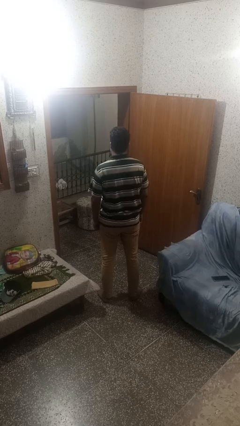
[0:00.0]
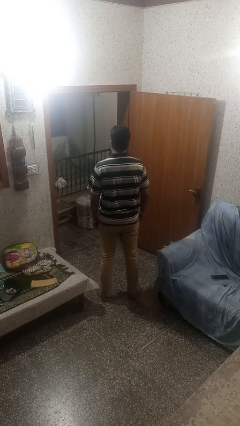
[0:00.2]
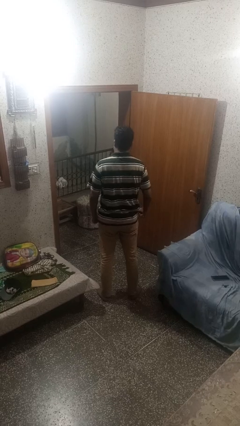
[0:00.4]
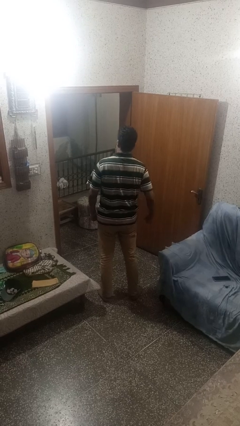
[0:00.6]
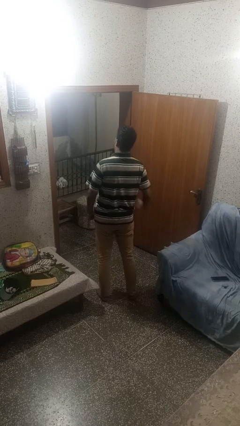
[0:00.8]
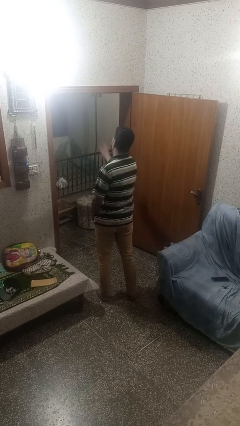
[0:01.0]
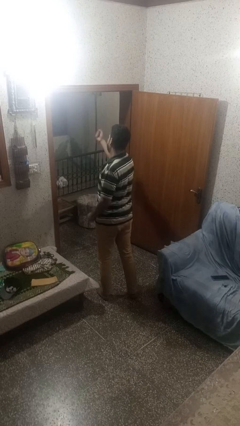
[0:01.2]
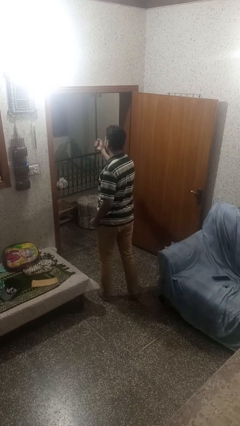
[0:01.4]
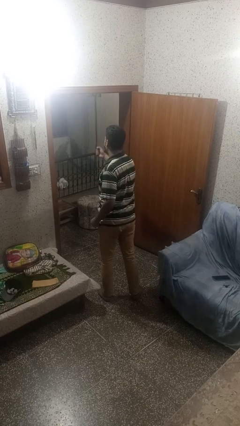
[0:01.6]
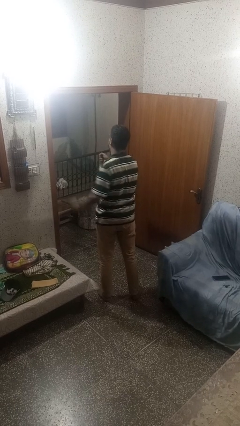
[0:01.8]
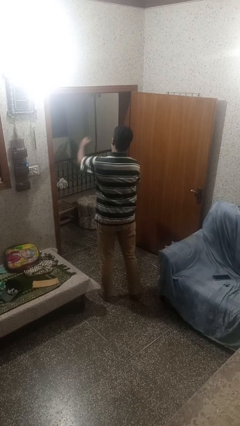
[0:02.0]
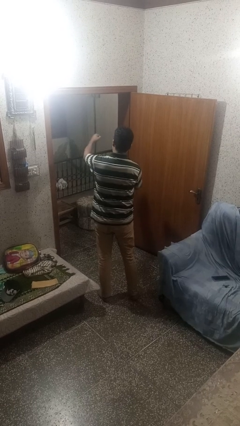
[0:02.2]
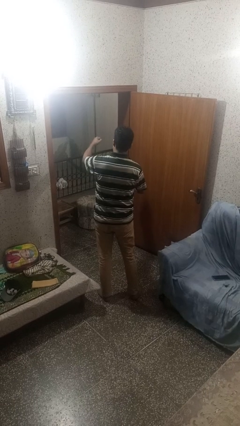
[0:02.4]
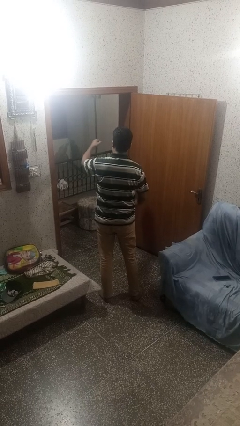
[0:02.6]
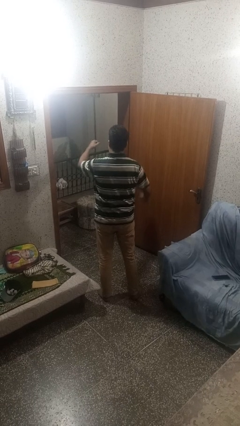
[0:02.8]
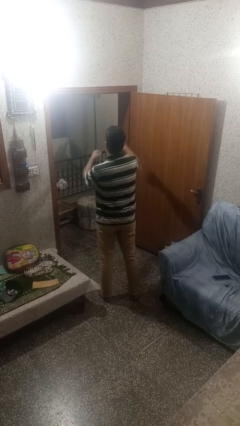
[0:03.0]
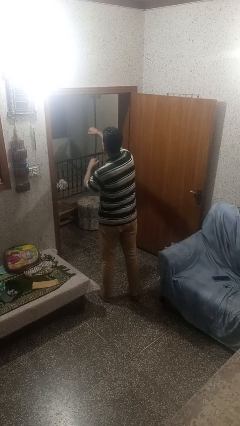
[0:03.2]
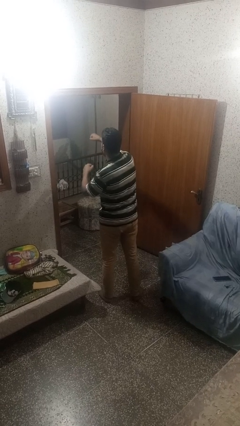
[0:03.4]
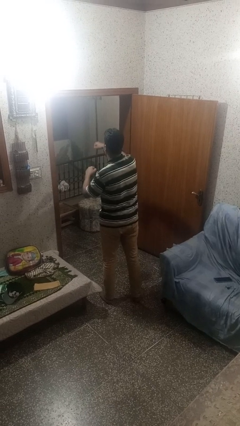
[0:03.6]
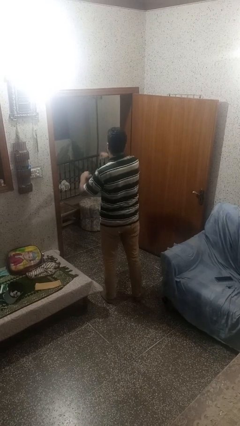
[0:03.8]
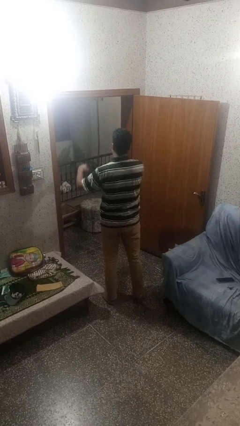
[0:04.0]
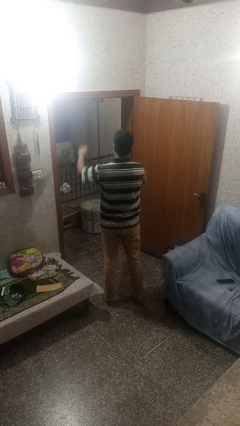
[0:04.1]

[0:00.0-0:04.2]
person punches

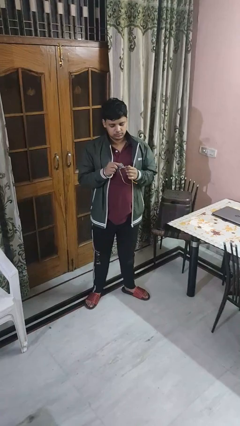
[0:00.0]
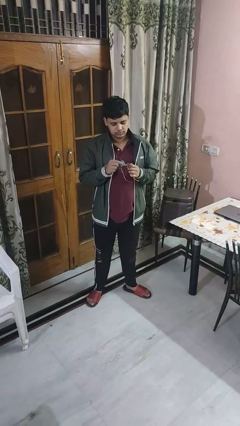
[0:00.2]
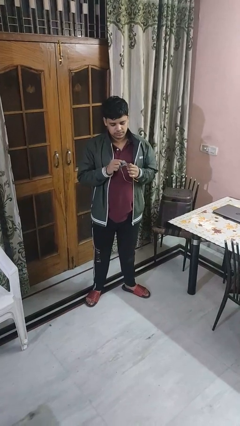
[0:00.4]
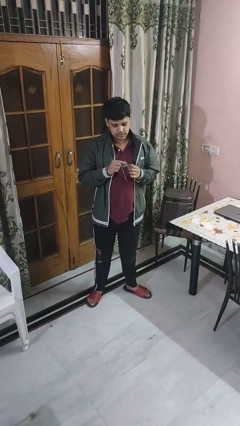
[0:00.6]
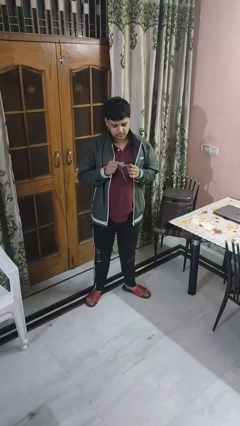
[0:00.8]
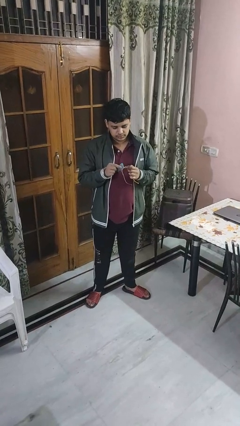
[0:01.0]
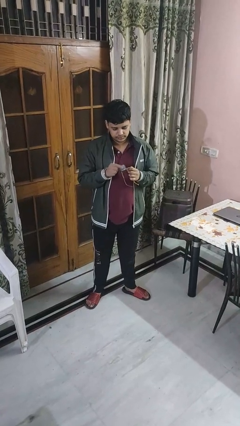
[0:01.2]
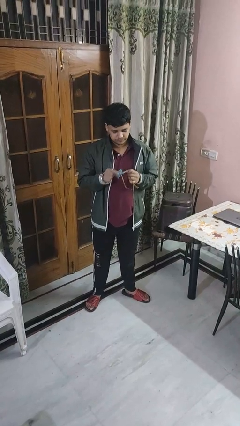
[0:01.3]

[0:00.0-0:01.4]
person cleans eyeglasses

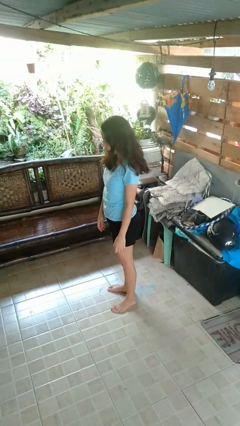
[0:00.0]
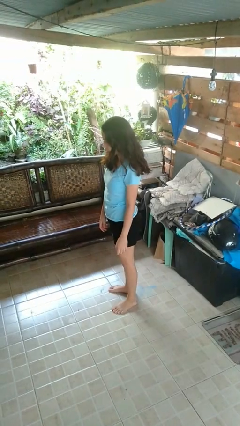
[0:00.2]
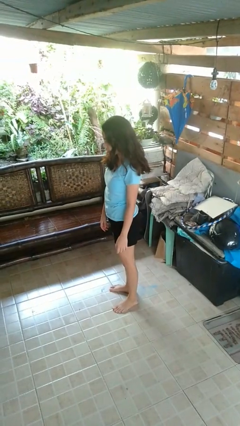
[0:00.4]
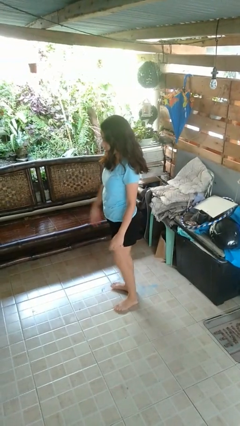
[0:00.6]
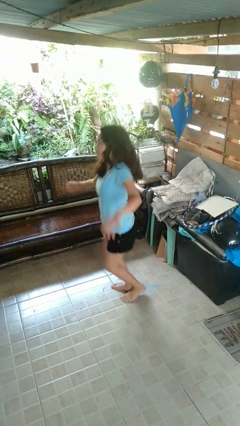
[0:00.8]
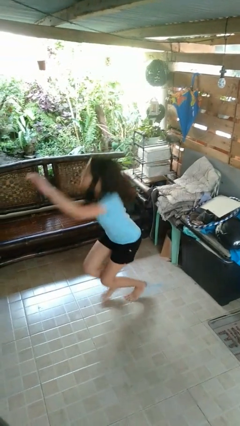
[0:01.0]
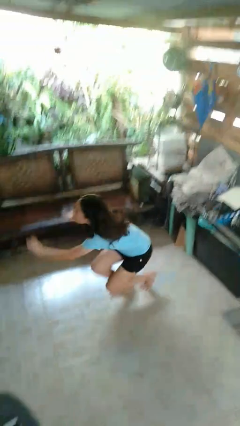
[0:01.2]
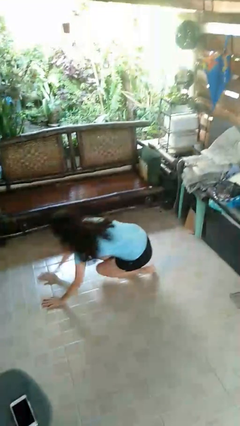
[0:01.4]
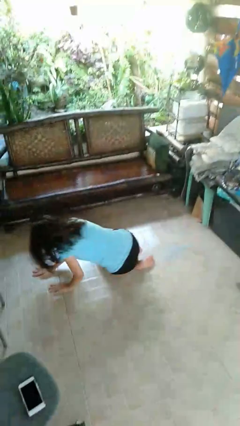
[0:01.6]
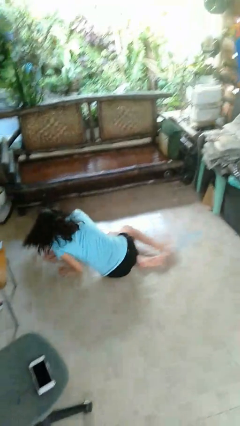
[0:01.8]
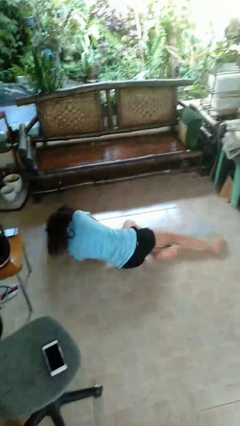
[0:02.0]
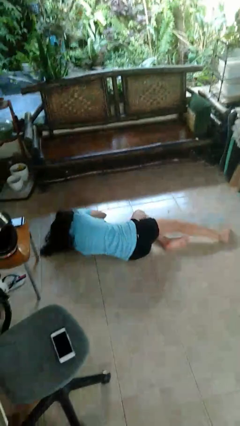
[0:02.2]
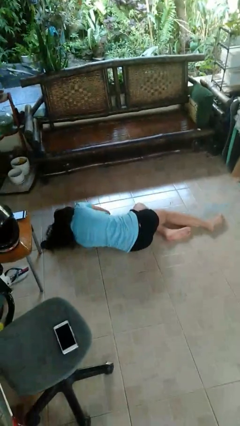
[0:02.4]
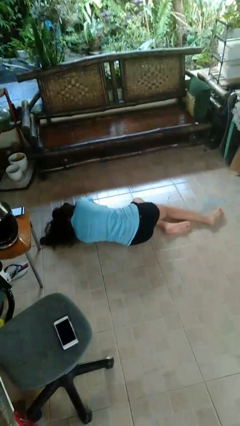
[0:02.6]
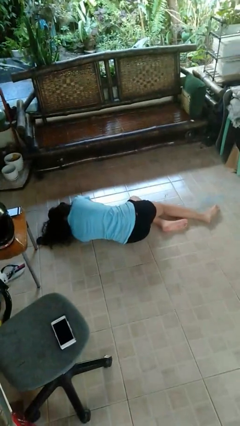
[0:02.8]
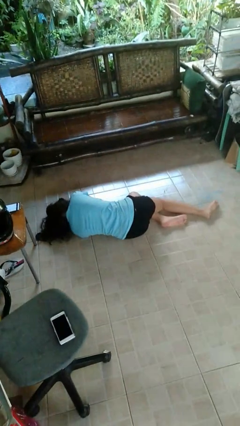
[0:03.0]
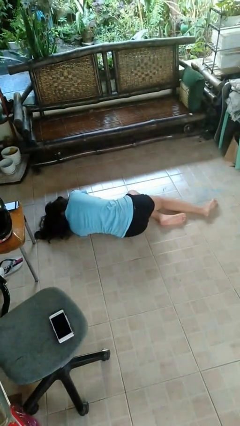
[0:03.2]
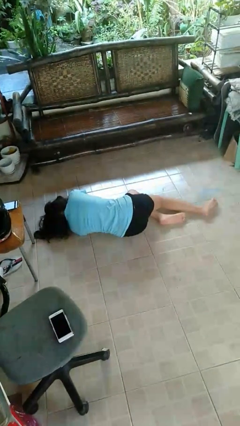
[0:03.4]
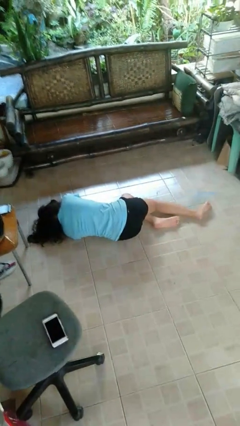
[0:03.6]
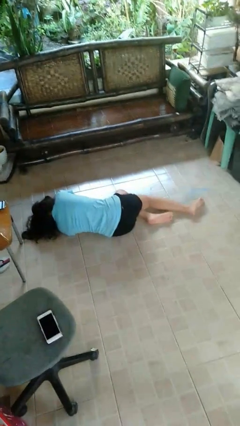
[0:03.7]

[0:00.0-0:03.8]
person falls while standing

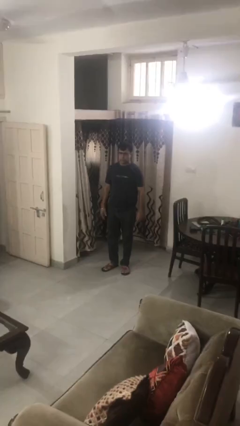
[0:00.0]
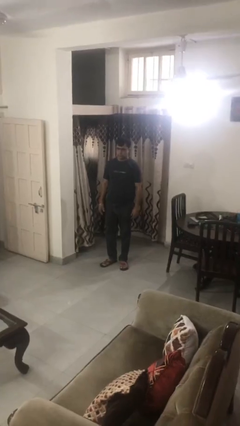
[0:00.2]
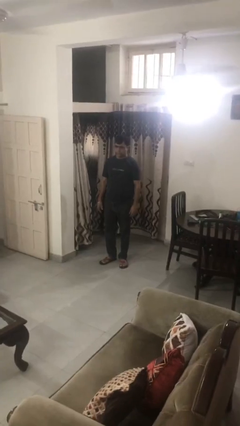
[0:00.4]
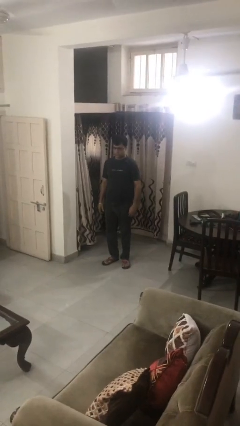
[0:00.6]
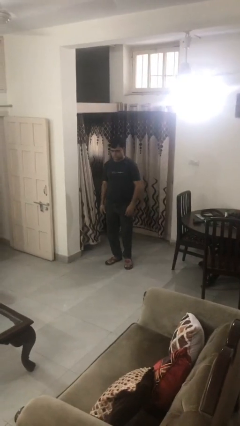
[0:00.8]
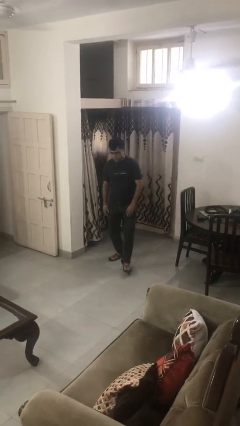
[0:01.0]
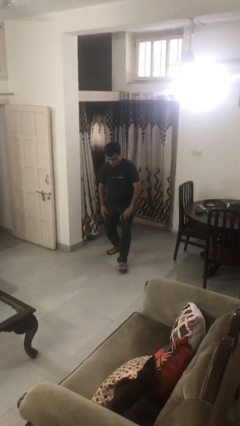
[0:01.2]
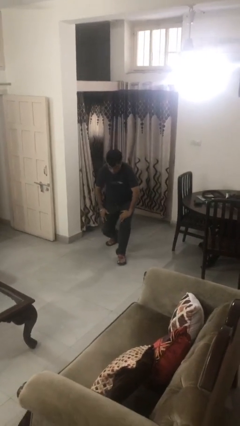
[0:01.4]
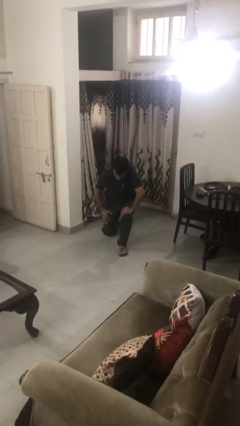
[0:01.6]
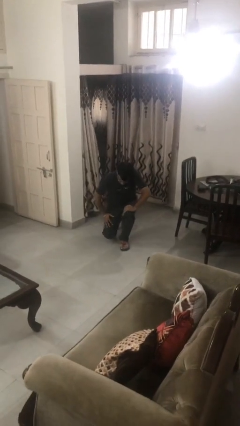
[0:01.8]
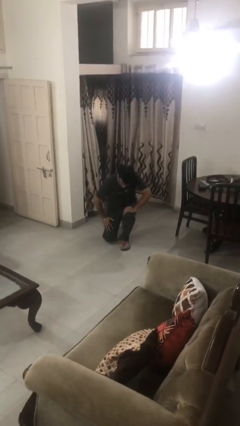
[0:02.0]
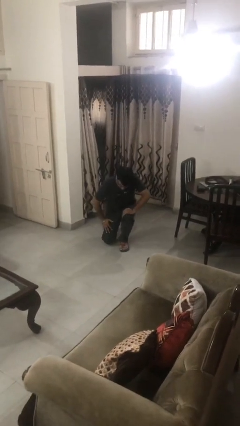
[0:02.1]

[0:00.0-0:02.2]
person kneels

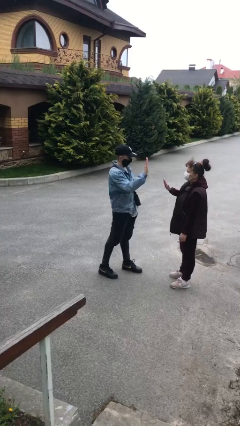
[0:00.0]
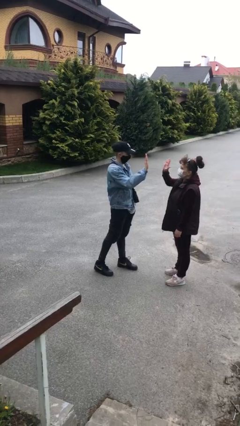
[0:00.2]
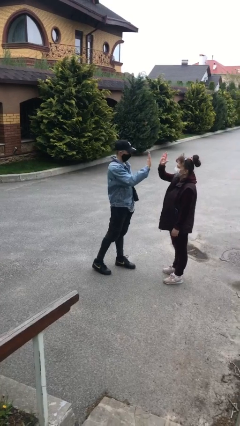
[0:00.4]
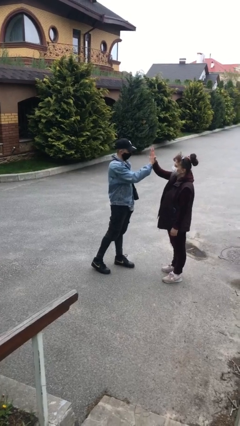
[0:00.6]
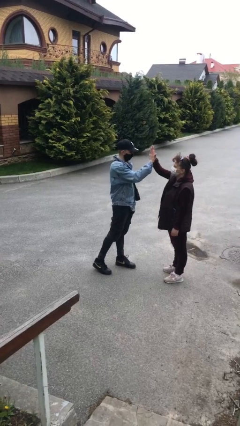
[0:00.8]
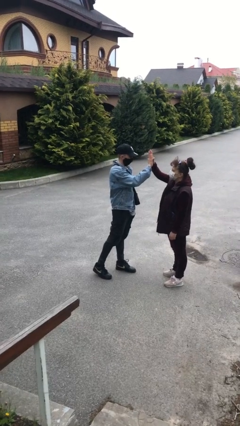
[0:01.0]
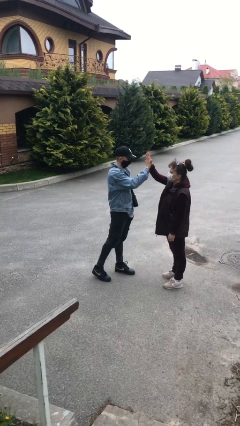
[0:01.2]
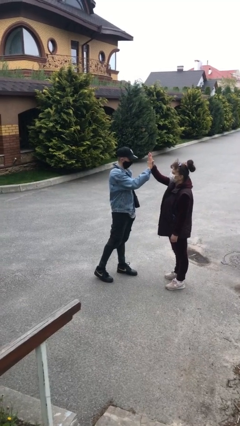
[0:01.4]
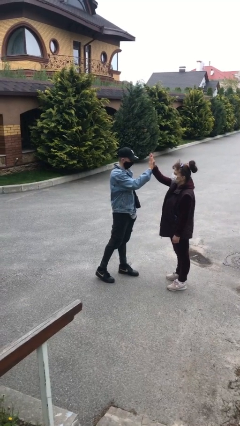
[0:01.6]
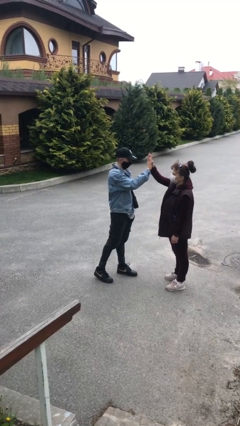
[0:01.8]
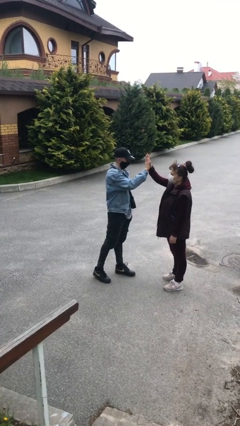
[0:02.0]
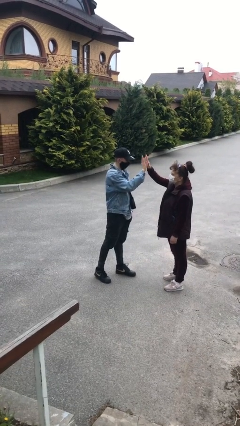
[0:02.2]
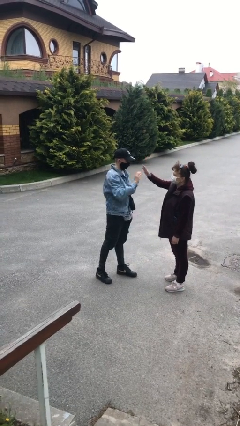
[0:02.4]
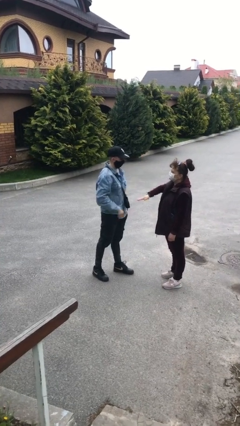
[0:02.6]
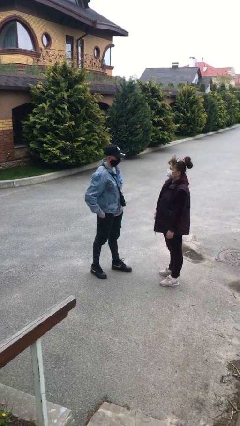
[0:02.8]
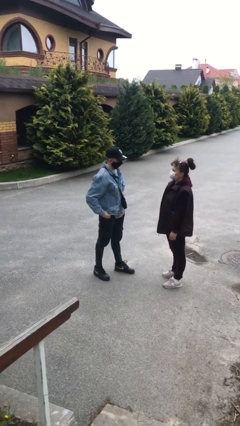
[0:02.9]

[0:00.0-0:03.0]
person highfives hand

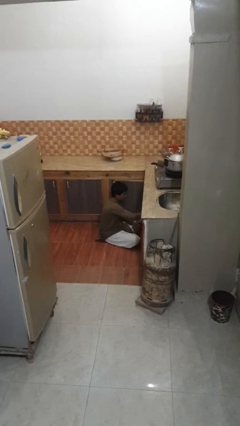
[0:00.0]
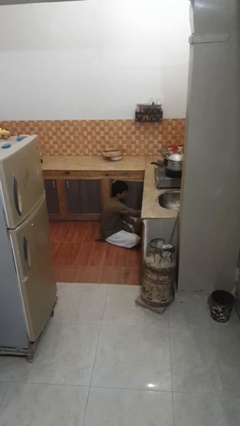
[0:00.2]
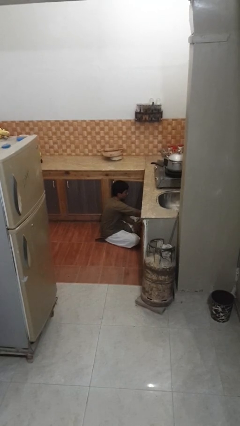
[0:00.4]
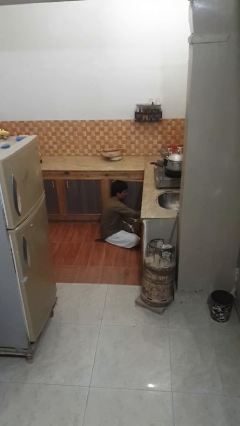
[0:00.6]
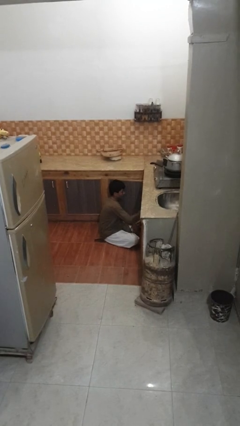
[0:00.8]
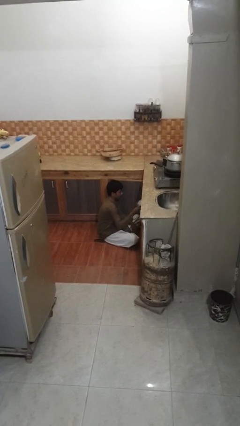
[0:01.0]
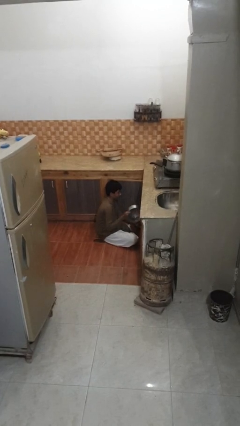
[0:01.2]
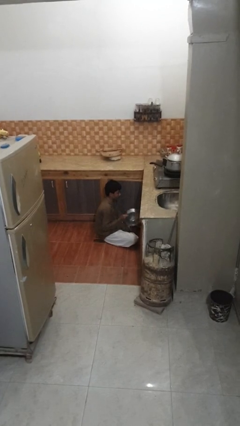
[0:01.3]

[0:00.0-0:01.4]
person takes object from kitchen drawer

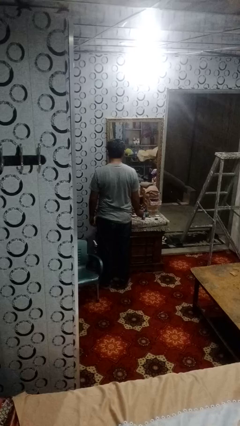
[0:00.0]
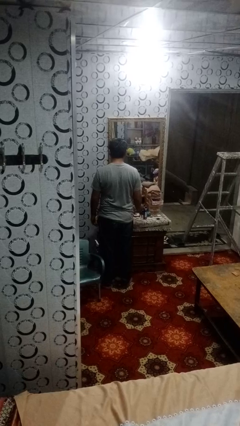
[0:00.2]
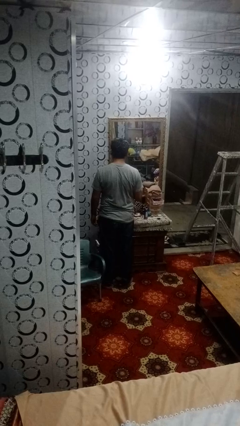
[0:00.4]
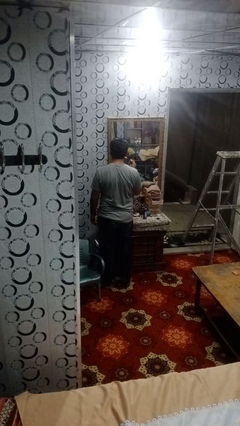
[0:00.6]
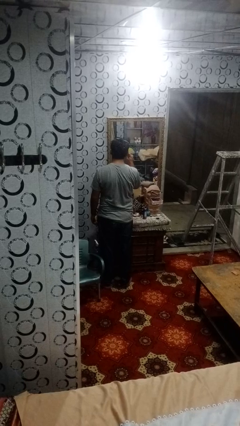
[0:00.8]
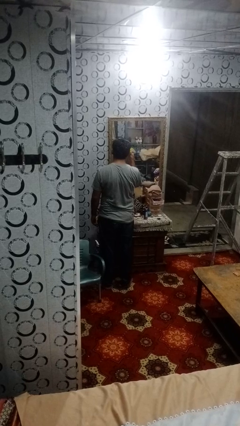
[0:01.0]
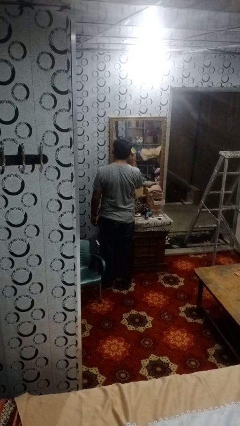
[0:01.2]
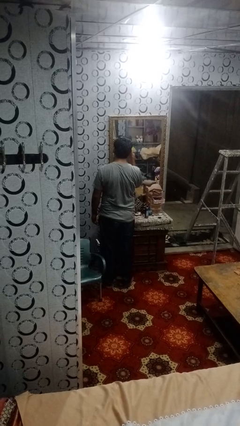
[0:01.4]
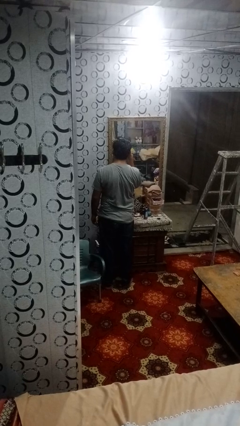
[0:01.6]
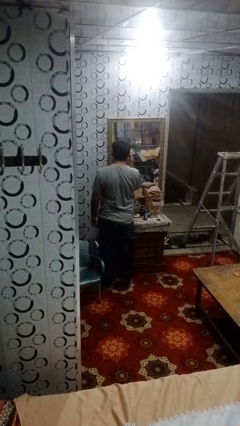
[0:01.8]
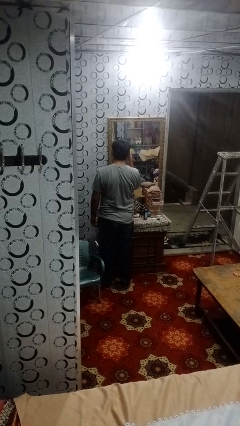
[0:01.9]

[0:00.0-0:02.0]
person applies eye makeup
